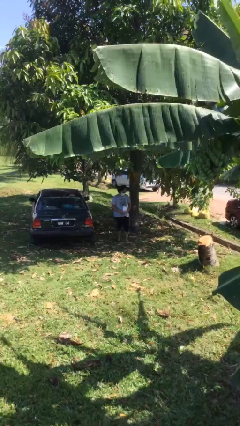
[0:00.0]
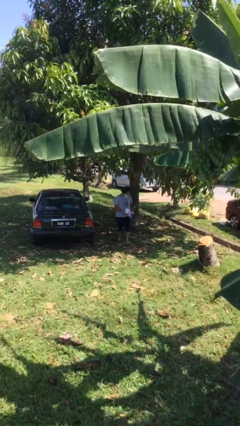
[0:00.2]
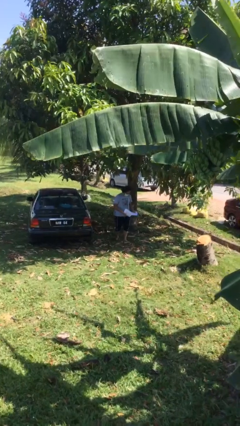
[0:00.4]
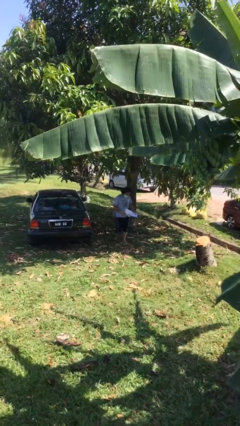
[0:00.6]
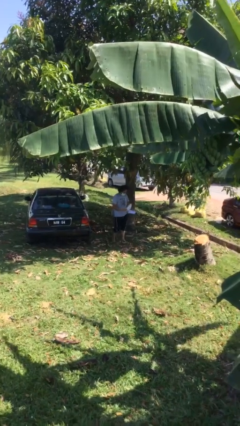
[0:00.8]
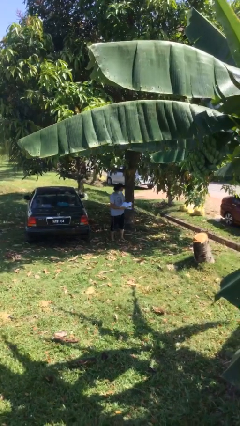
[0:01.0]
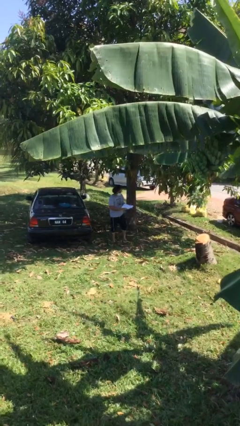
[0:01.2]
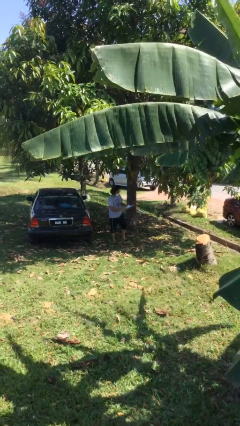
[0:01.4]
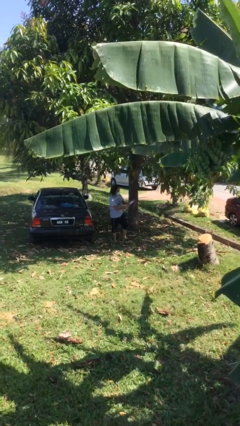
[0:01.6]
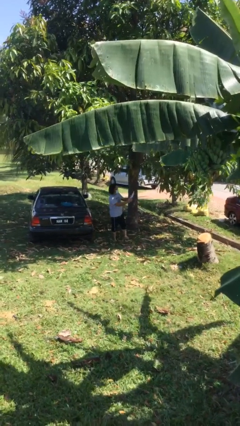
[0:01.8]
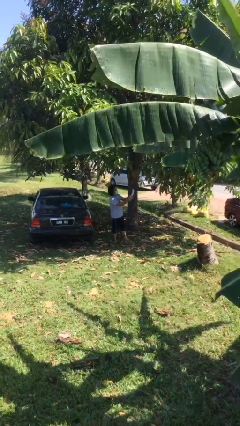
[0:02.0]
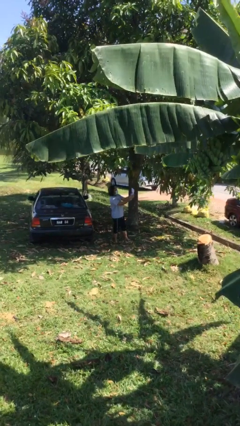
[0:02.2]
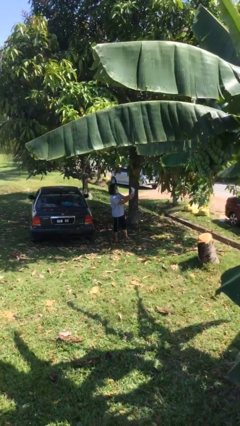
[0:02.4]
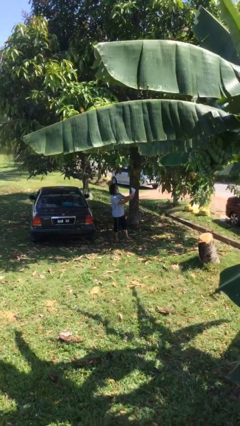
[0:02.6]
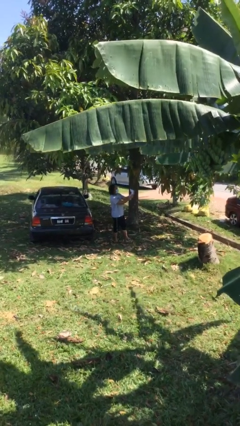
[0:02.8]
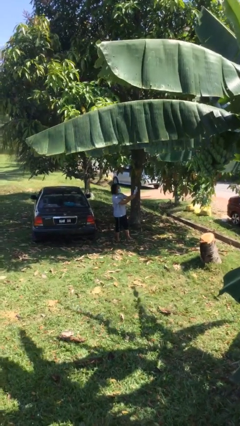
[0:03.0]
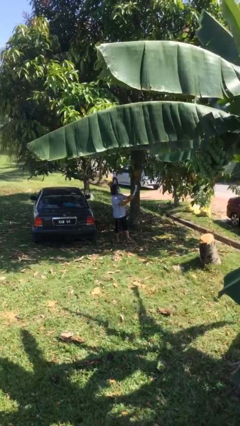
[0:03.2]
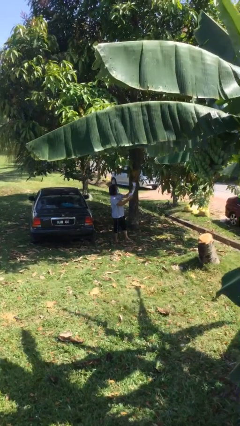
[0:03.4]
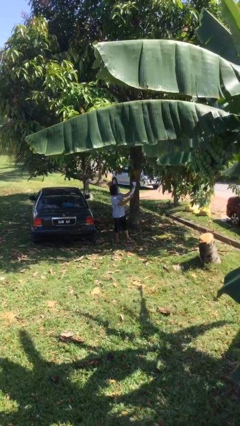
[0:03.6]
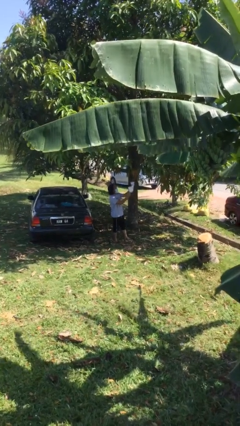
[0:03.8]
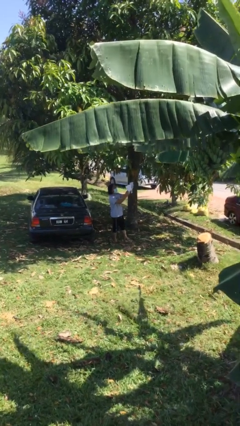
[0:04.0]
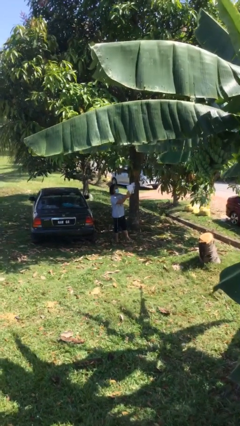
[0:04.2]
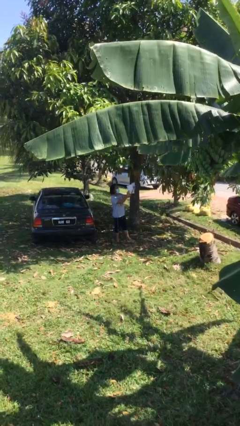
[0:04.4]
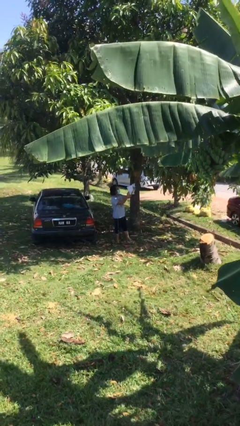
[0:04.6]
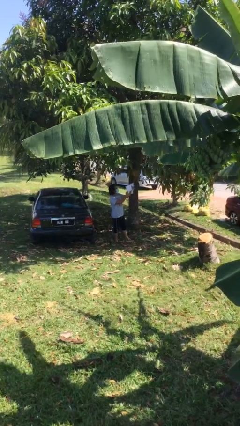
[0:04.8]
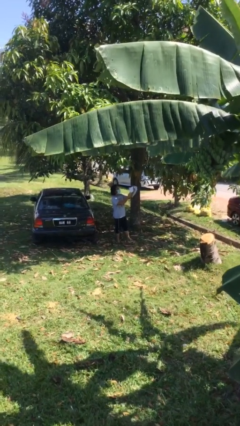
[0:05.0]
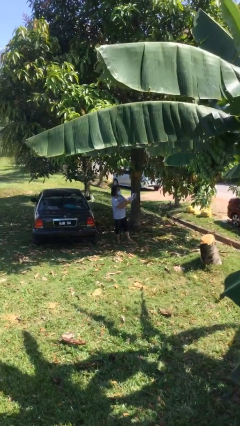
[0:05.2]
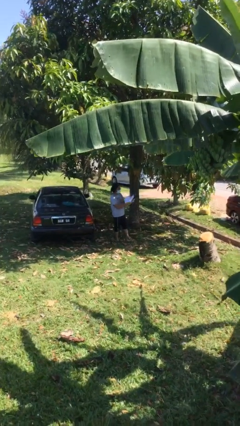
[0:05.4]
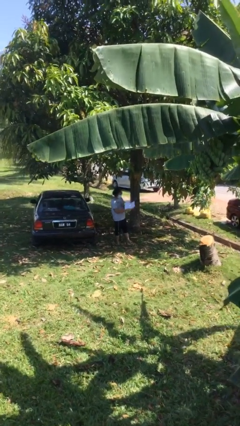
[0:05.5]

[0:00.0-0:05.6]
person reads document

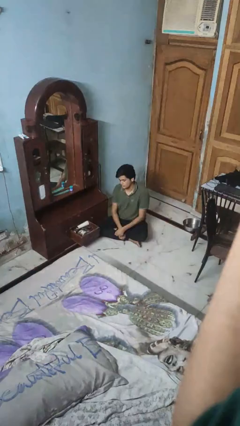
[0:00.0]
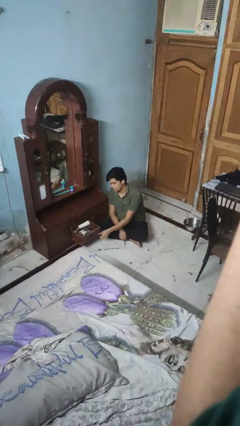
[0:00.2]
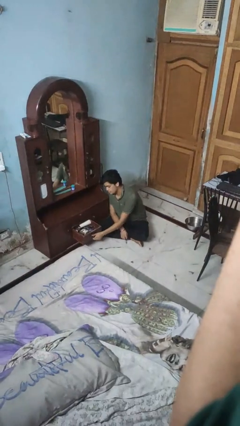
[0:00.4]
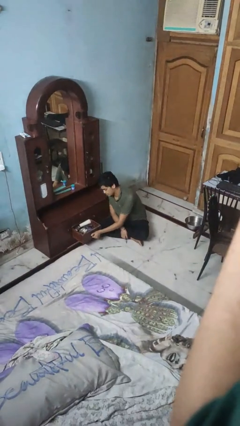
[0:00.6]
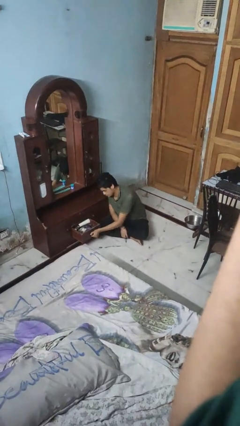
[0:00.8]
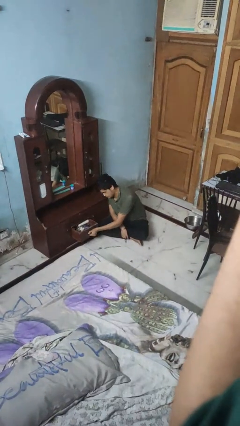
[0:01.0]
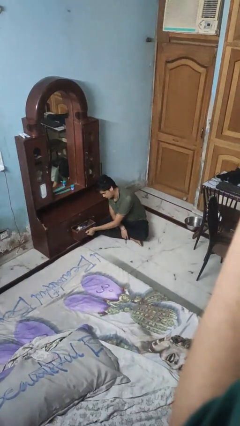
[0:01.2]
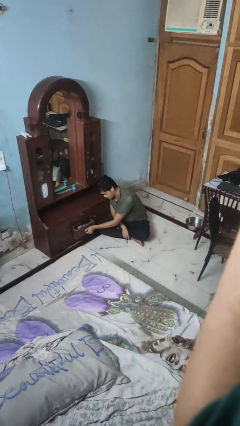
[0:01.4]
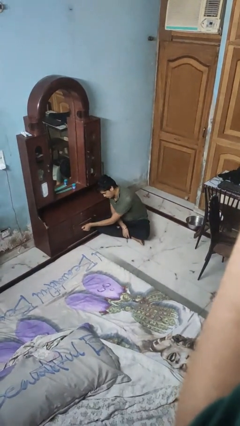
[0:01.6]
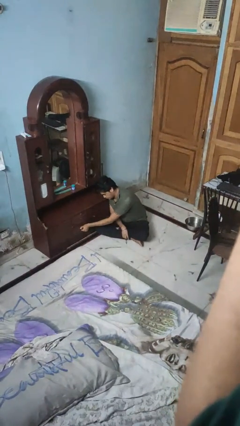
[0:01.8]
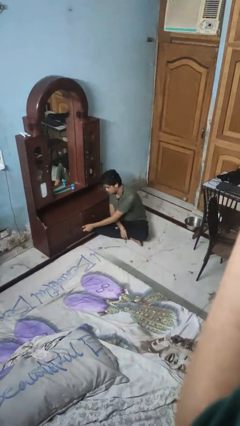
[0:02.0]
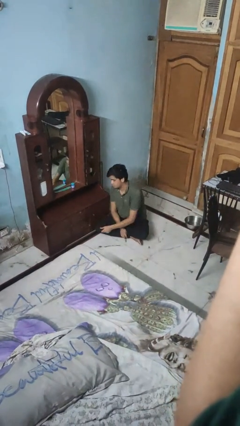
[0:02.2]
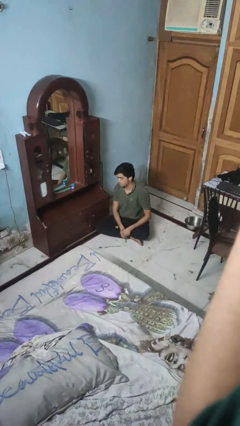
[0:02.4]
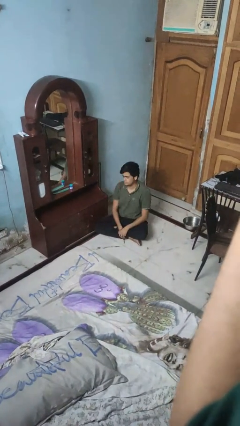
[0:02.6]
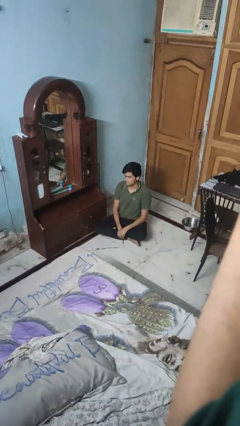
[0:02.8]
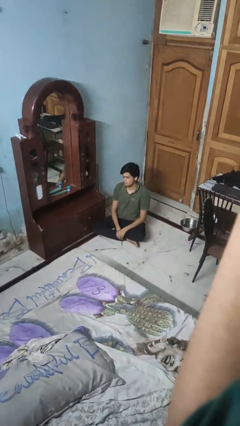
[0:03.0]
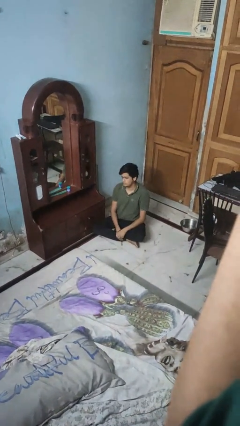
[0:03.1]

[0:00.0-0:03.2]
person closes dresser drawer

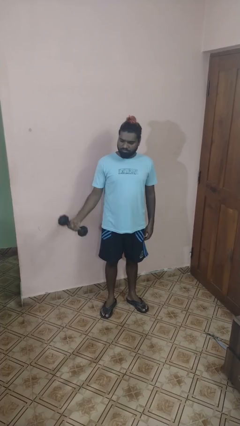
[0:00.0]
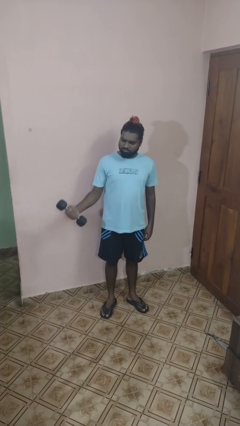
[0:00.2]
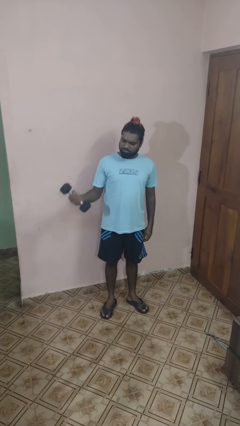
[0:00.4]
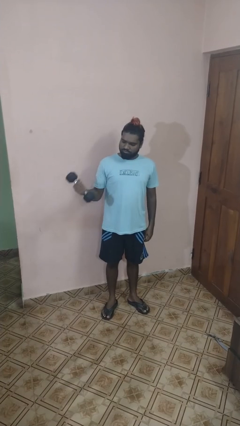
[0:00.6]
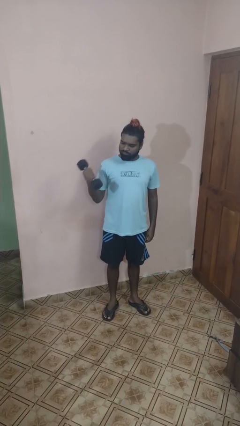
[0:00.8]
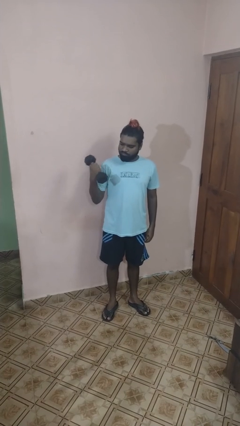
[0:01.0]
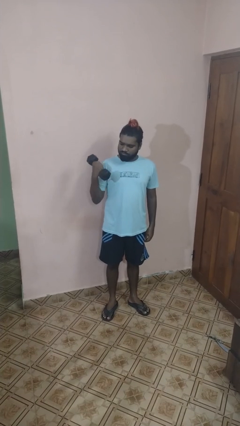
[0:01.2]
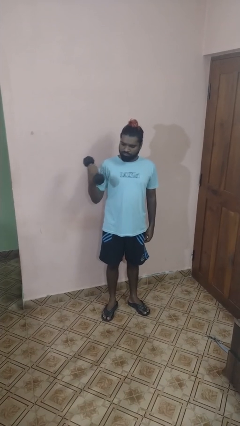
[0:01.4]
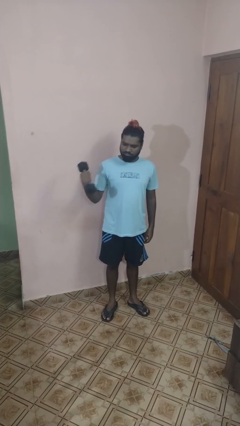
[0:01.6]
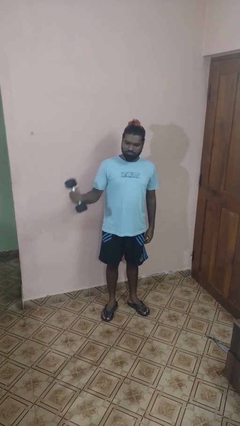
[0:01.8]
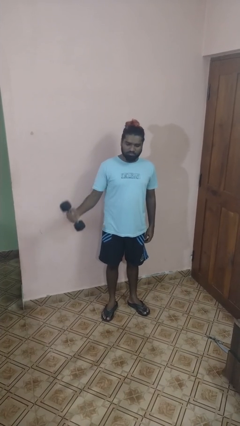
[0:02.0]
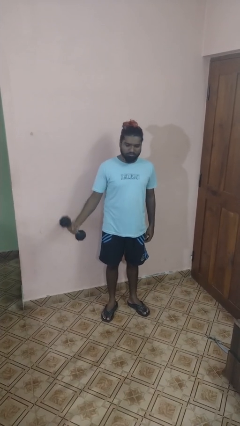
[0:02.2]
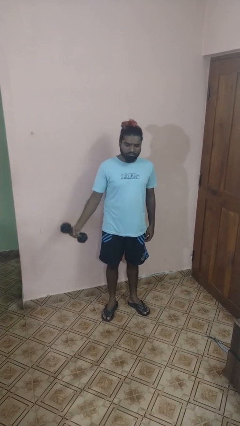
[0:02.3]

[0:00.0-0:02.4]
person lifts dumbbells

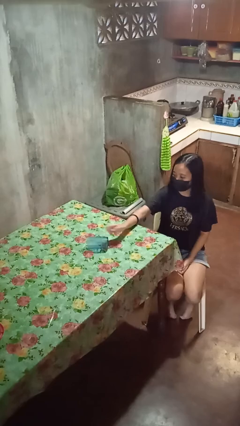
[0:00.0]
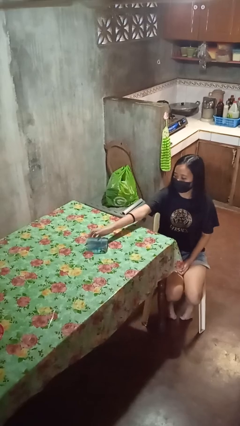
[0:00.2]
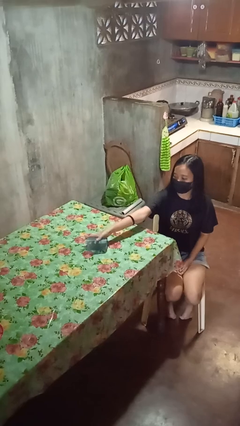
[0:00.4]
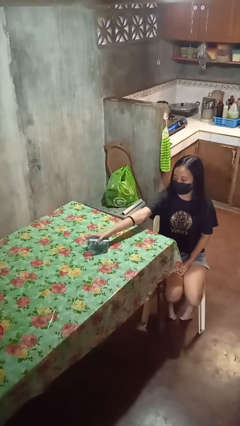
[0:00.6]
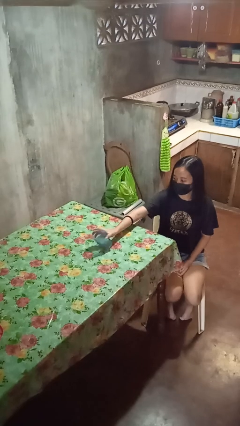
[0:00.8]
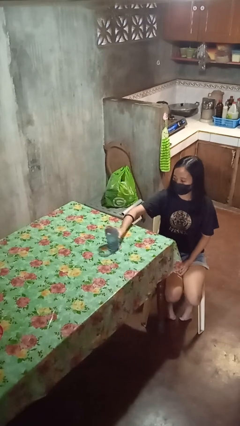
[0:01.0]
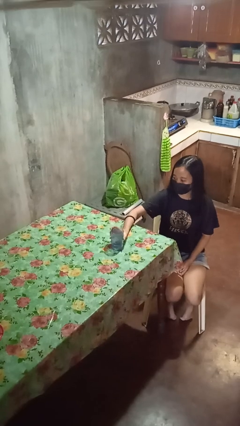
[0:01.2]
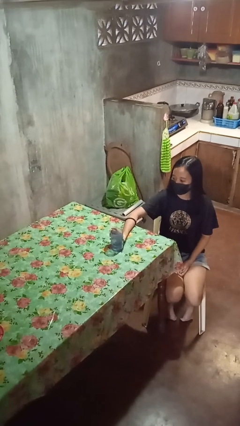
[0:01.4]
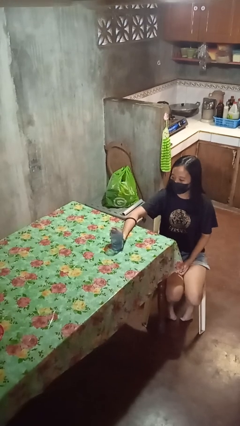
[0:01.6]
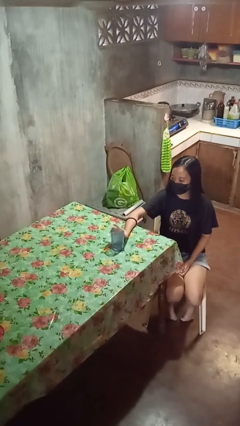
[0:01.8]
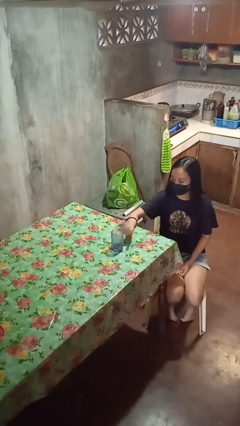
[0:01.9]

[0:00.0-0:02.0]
person sets upright glass

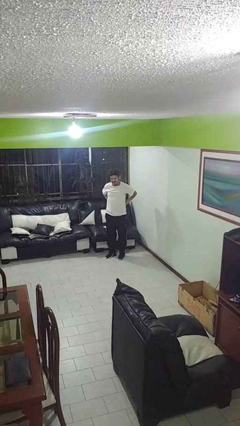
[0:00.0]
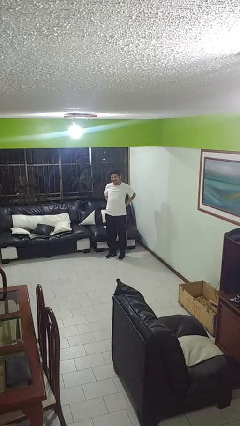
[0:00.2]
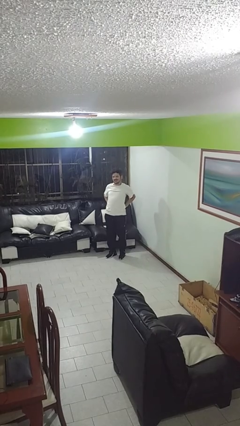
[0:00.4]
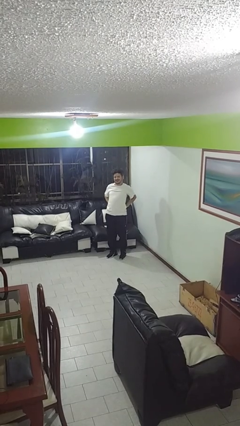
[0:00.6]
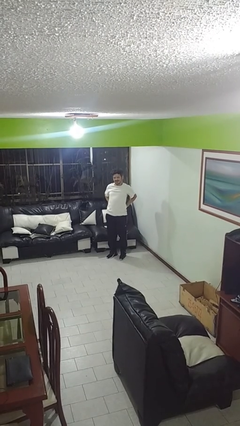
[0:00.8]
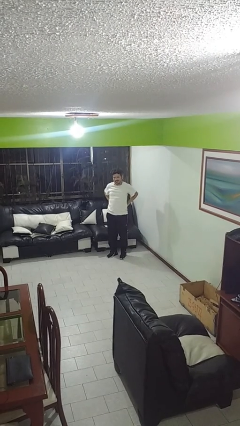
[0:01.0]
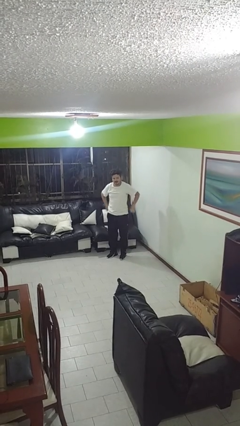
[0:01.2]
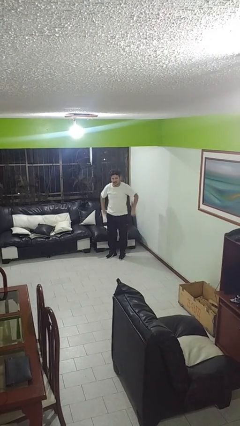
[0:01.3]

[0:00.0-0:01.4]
person stretches back

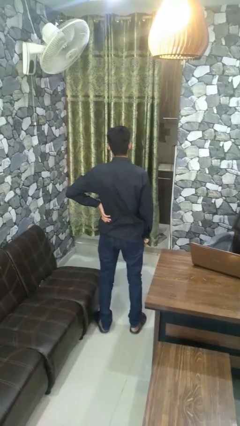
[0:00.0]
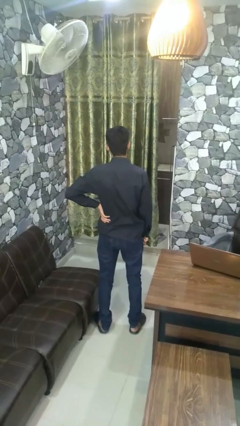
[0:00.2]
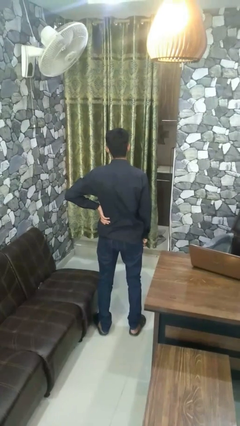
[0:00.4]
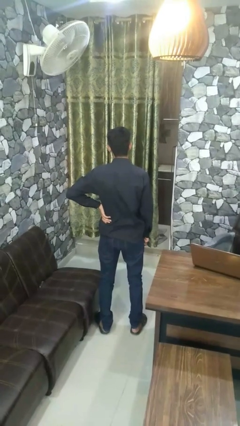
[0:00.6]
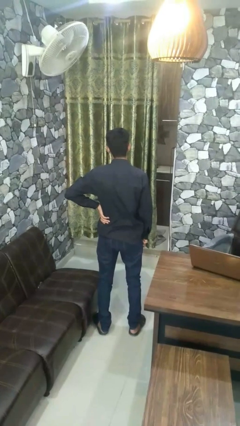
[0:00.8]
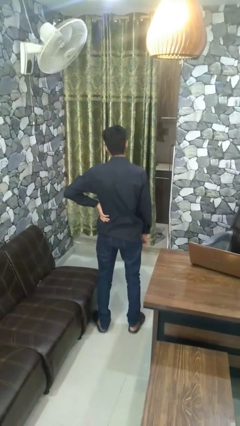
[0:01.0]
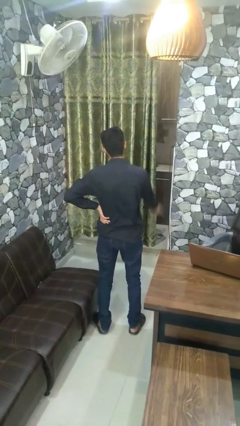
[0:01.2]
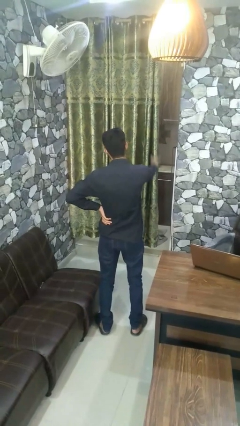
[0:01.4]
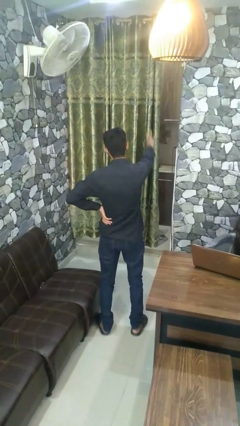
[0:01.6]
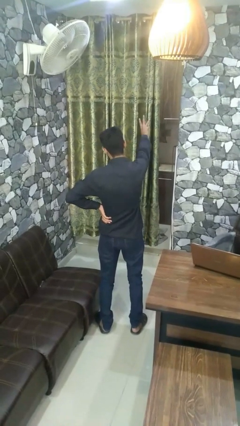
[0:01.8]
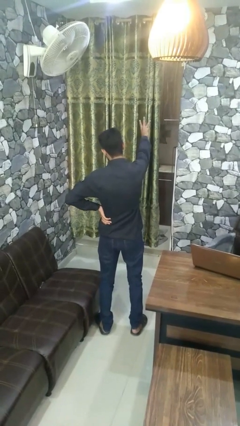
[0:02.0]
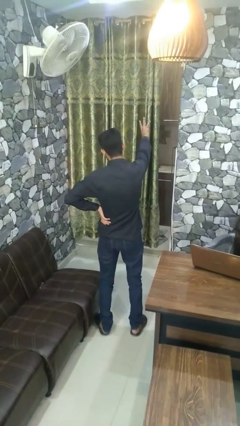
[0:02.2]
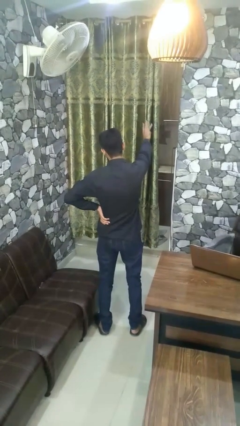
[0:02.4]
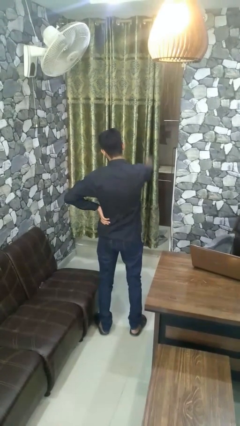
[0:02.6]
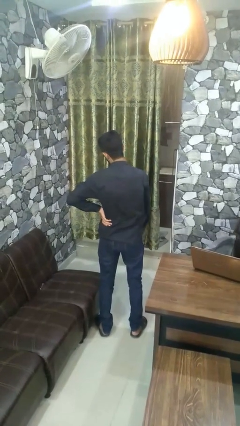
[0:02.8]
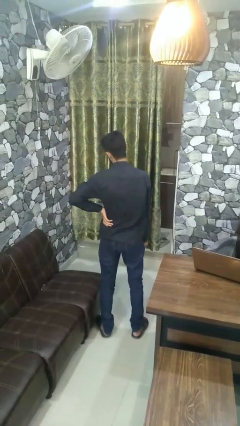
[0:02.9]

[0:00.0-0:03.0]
person gestures number three
